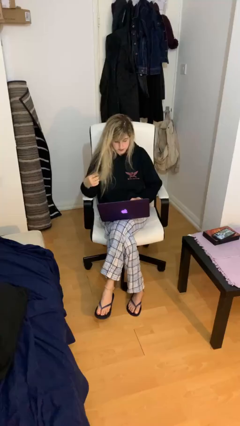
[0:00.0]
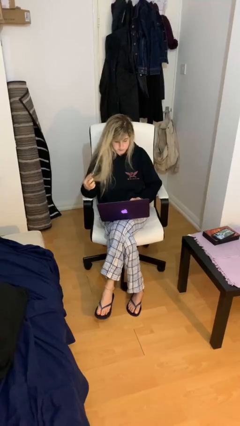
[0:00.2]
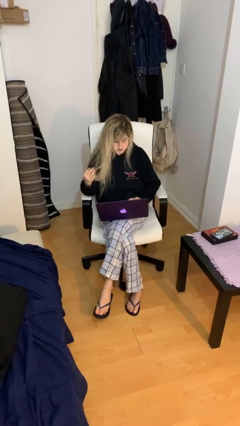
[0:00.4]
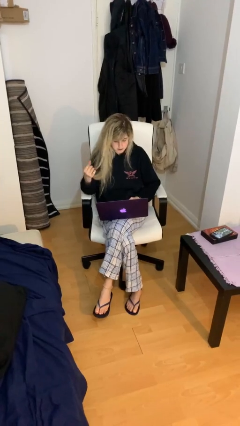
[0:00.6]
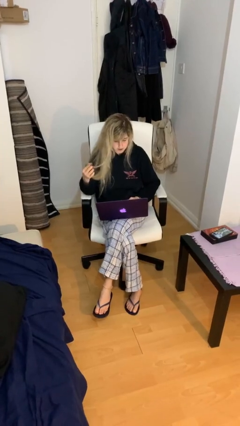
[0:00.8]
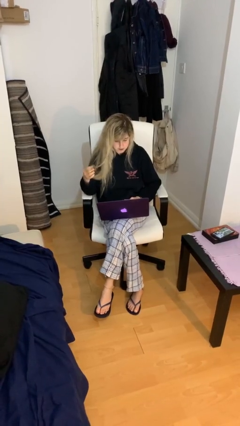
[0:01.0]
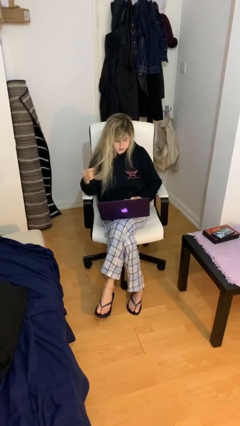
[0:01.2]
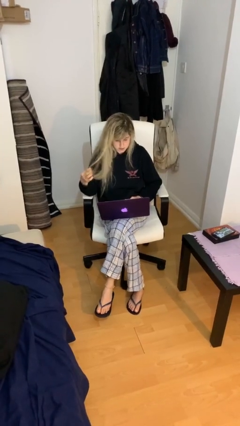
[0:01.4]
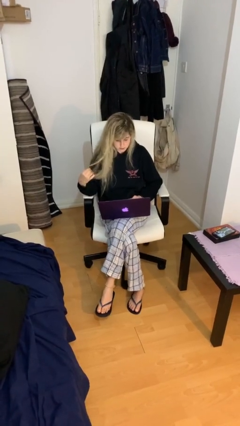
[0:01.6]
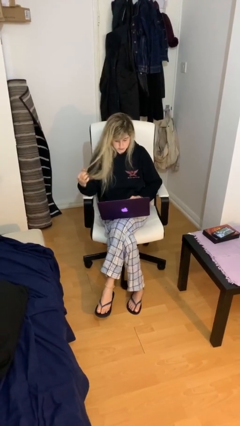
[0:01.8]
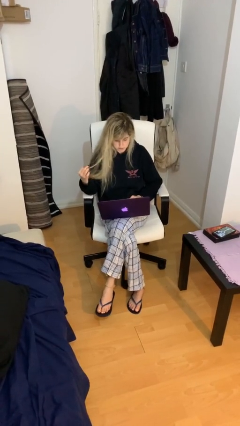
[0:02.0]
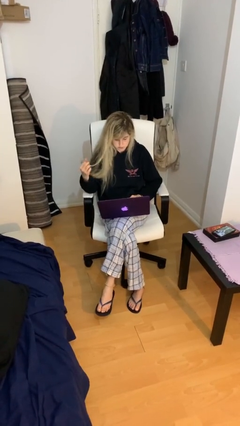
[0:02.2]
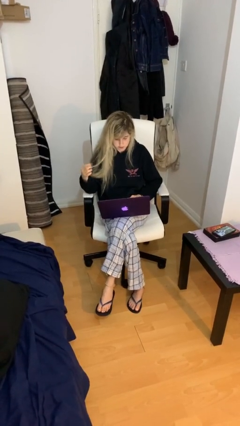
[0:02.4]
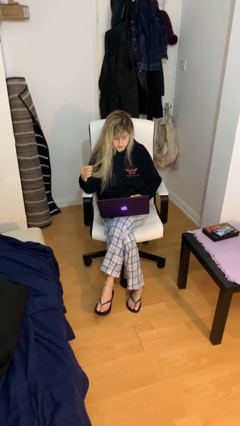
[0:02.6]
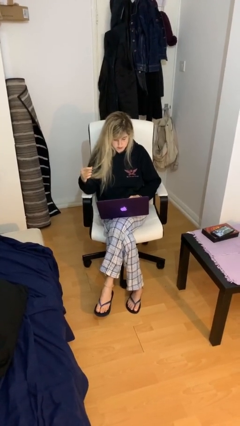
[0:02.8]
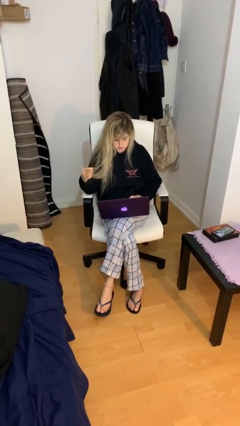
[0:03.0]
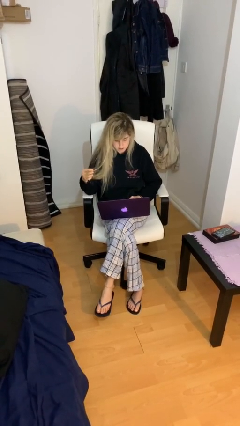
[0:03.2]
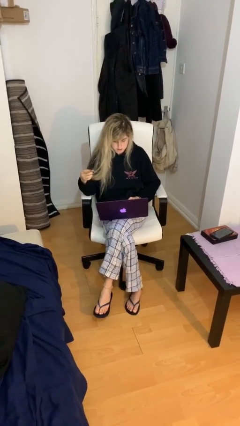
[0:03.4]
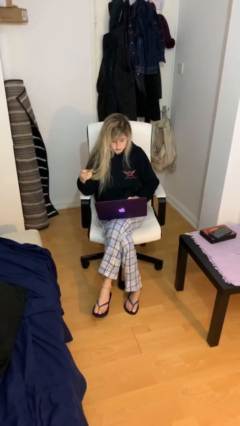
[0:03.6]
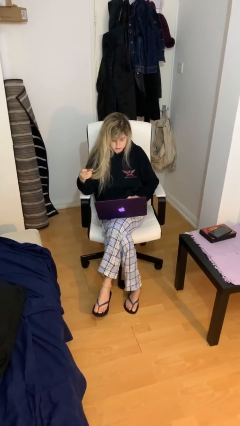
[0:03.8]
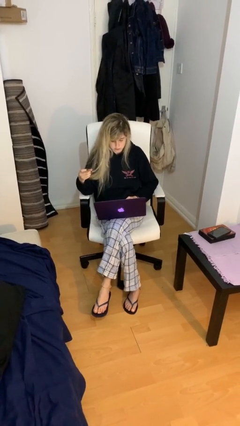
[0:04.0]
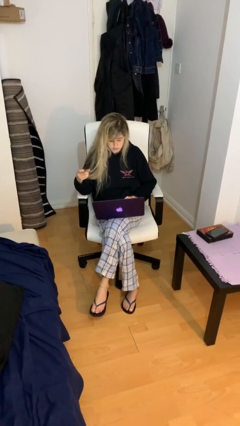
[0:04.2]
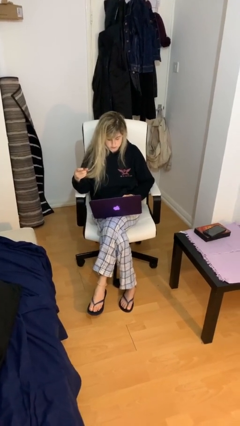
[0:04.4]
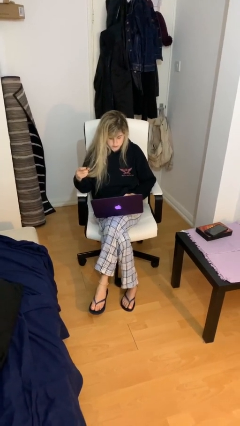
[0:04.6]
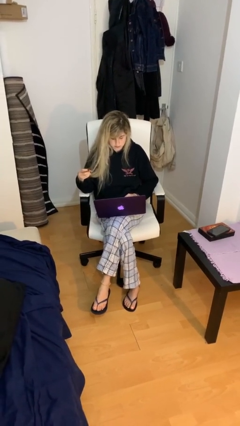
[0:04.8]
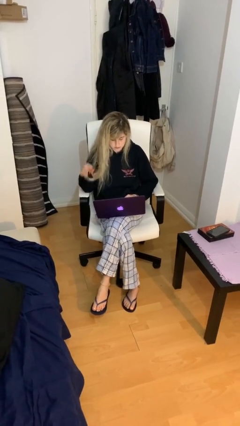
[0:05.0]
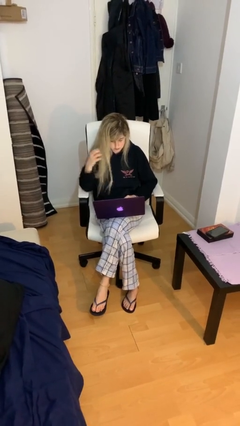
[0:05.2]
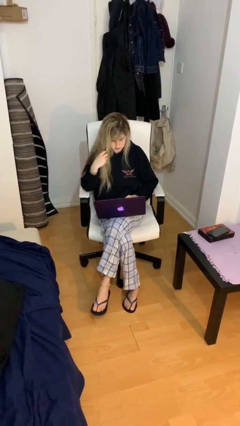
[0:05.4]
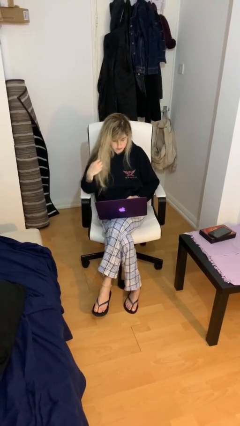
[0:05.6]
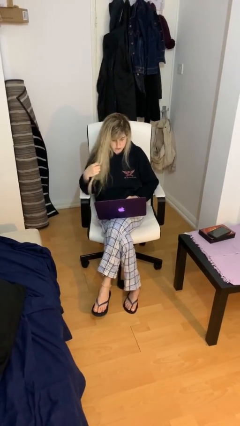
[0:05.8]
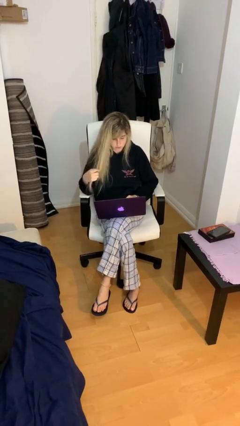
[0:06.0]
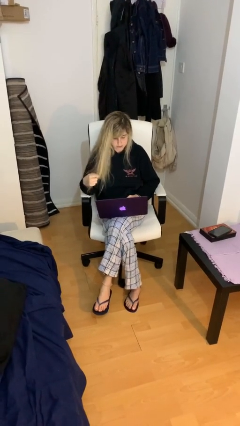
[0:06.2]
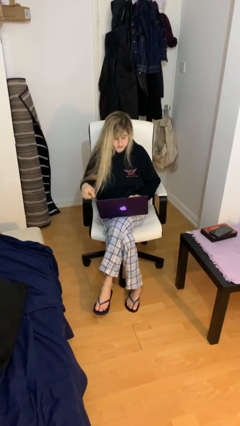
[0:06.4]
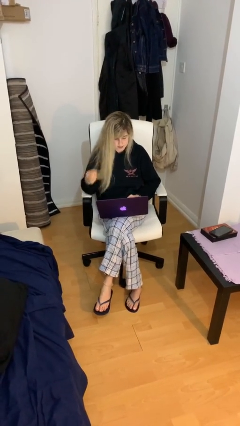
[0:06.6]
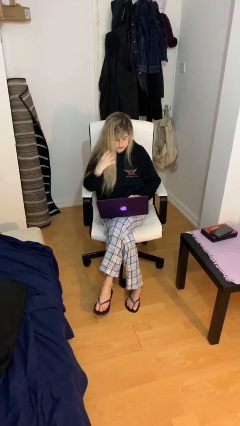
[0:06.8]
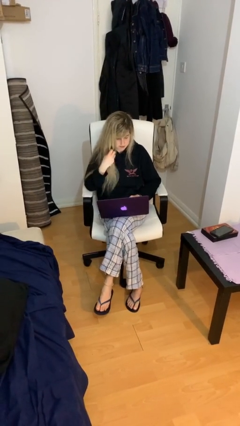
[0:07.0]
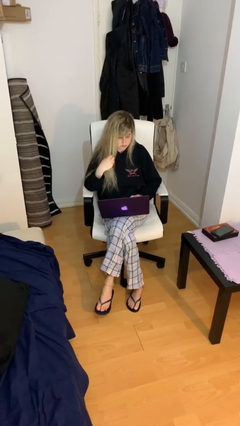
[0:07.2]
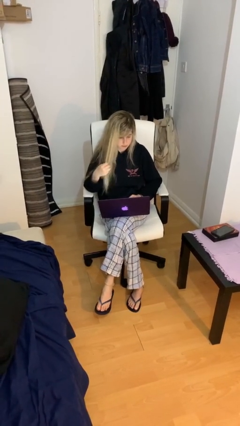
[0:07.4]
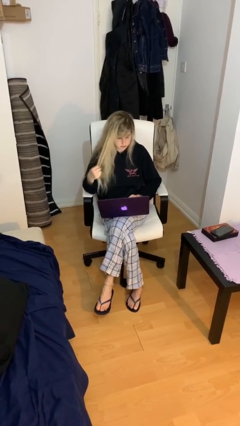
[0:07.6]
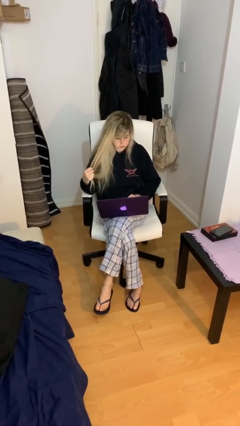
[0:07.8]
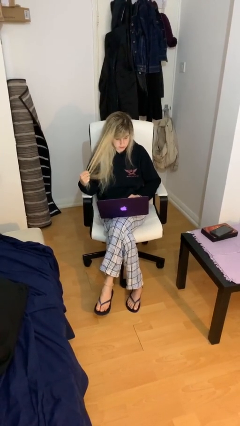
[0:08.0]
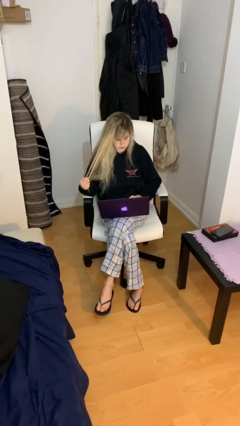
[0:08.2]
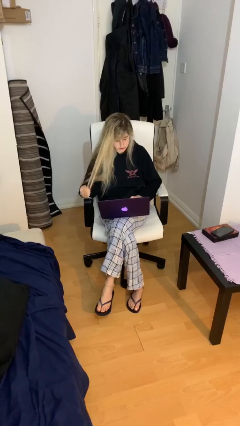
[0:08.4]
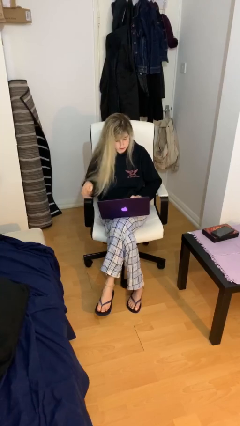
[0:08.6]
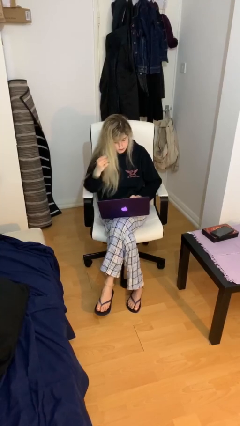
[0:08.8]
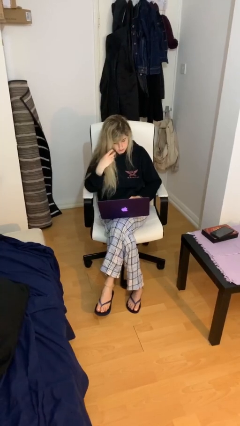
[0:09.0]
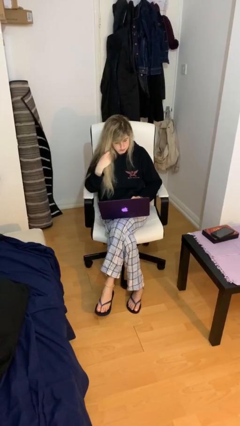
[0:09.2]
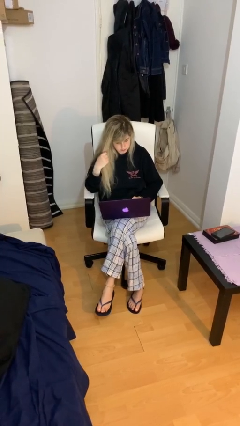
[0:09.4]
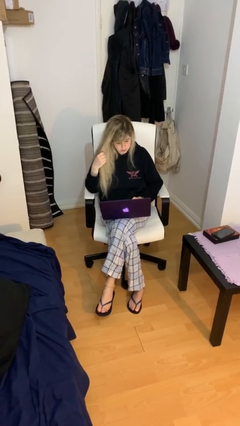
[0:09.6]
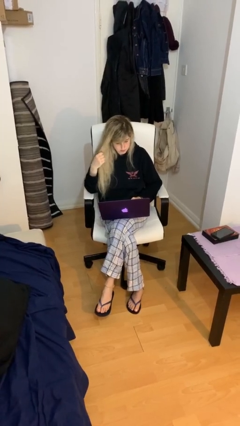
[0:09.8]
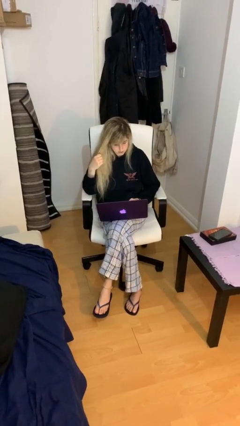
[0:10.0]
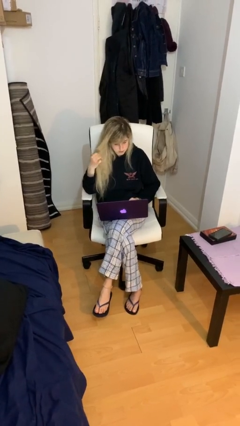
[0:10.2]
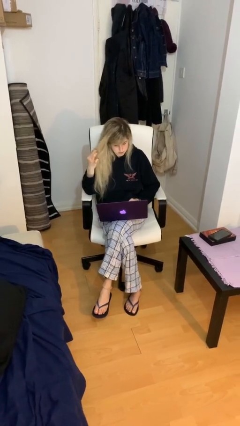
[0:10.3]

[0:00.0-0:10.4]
person interacts with laptop

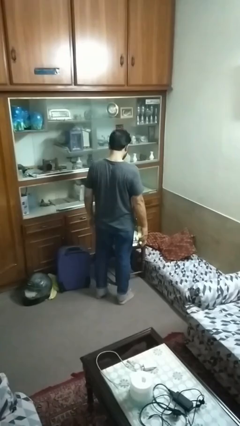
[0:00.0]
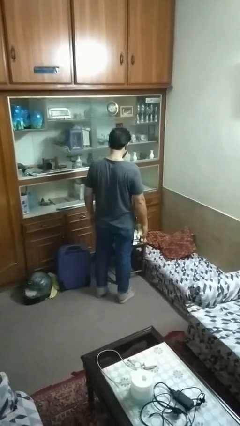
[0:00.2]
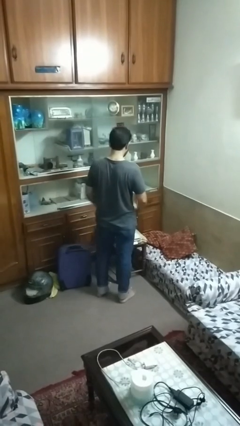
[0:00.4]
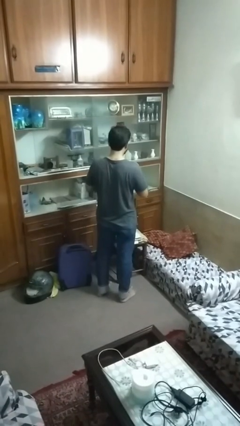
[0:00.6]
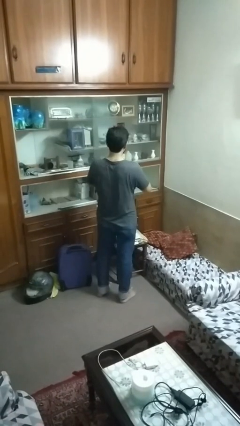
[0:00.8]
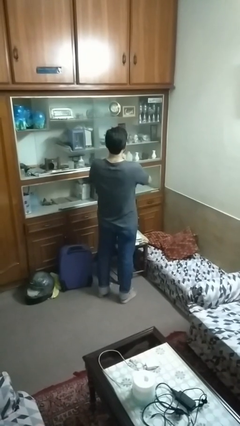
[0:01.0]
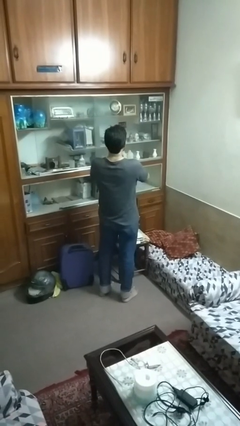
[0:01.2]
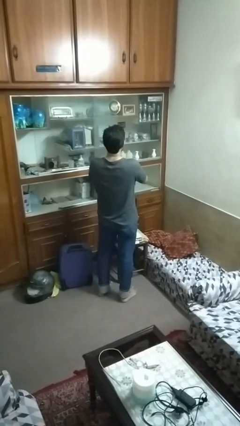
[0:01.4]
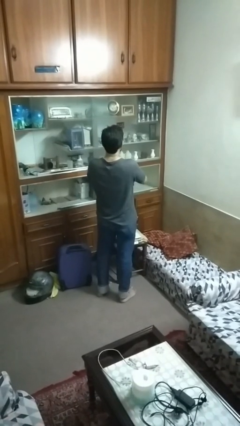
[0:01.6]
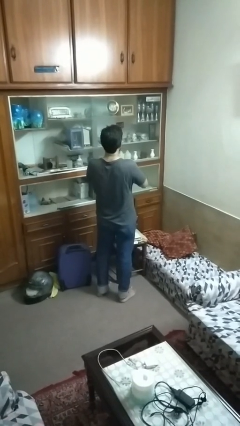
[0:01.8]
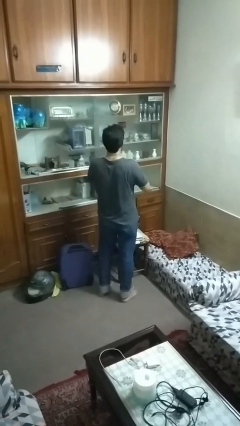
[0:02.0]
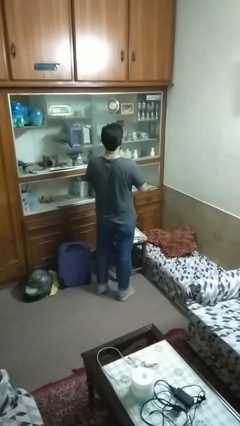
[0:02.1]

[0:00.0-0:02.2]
person hugs stuffed animal

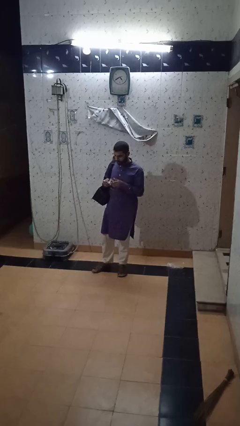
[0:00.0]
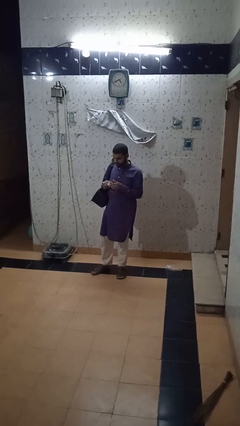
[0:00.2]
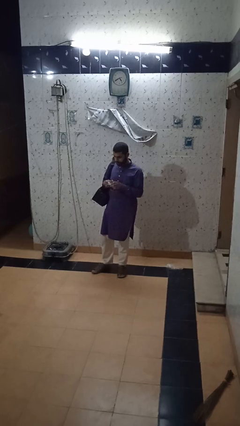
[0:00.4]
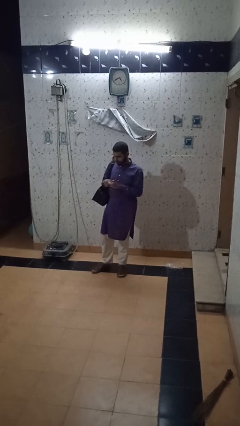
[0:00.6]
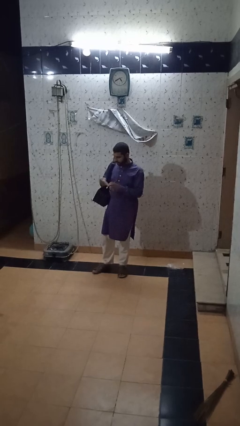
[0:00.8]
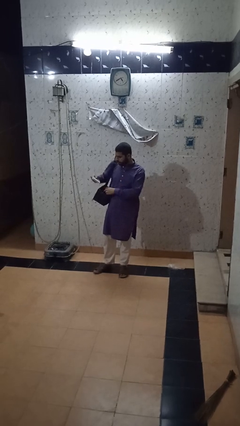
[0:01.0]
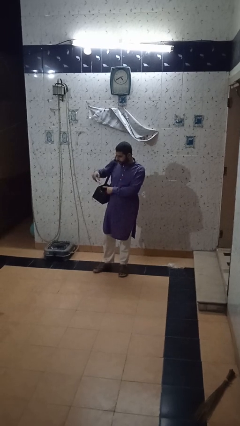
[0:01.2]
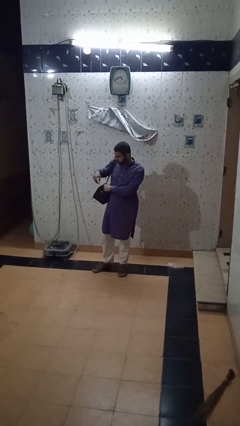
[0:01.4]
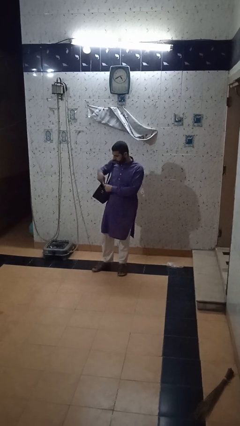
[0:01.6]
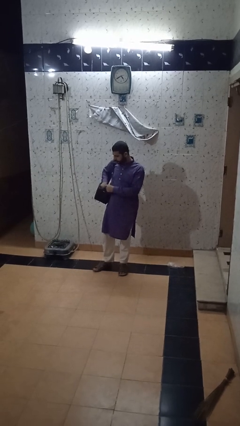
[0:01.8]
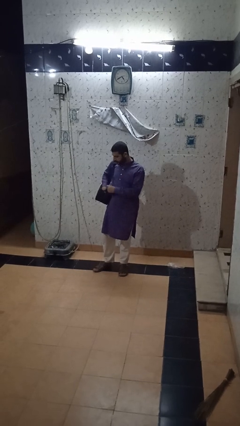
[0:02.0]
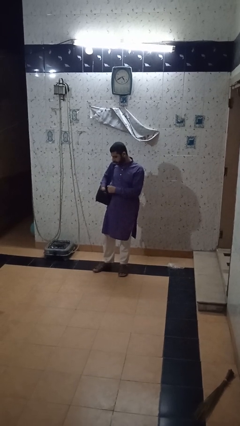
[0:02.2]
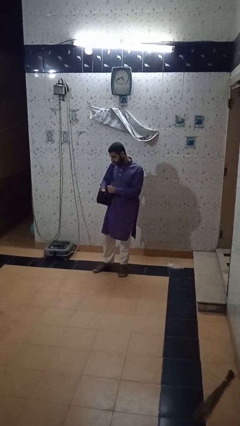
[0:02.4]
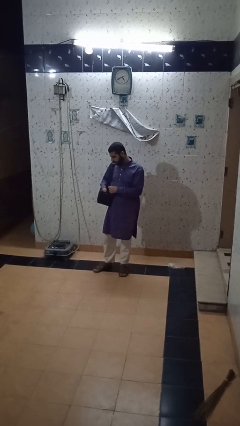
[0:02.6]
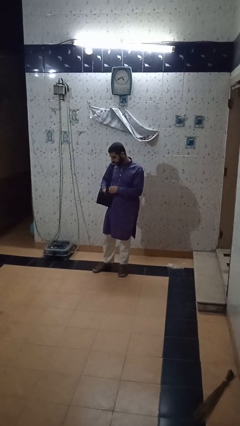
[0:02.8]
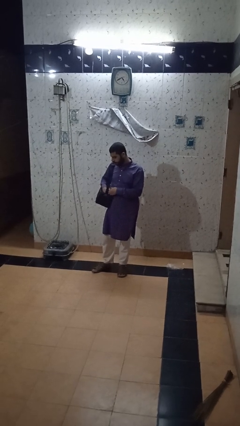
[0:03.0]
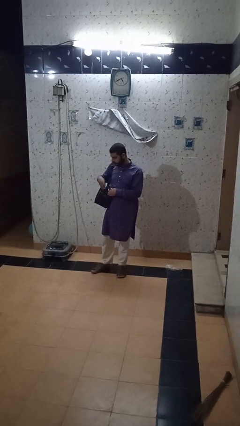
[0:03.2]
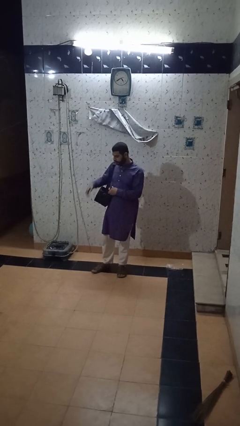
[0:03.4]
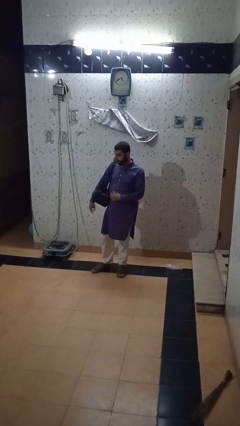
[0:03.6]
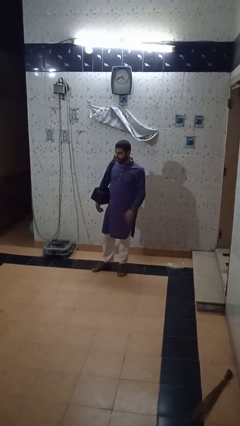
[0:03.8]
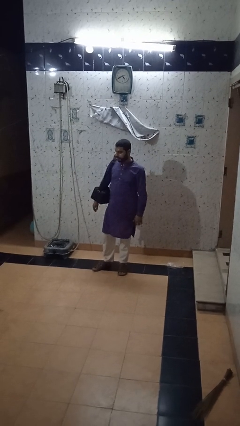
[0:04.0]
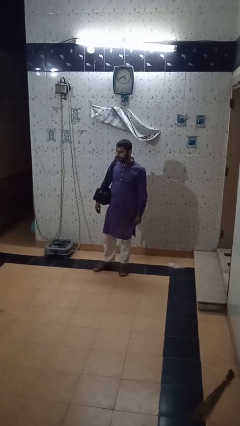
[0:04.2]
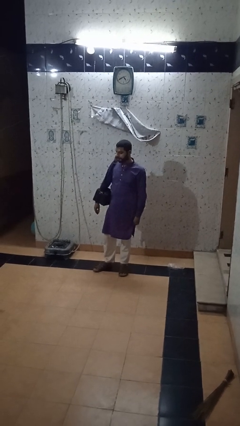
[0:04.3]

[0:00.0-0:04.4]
person puts object into backpack

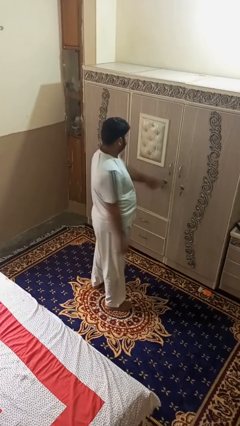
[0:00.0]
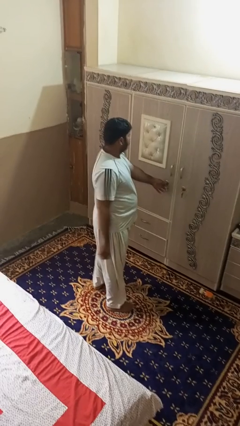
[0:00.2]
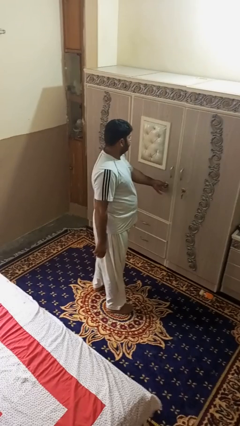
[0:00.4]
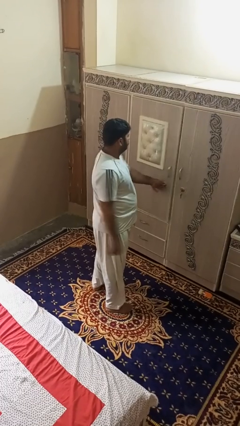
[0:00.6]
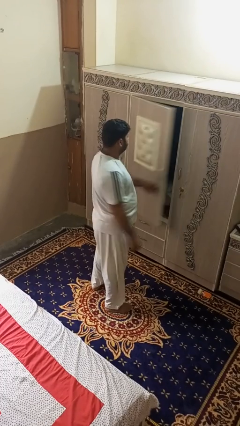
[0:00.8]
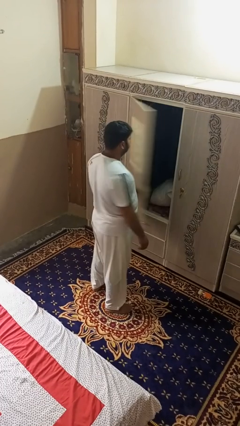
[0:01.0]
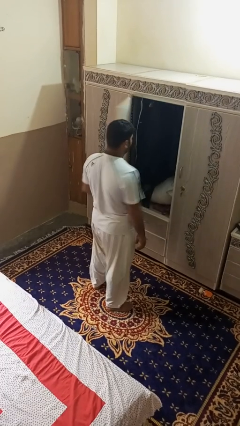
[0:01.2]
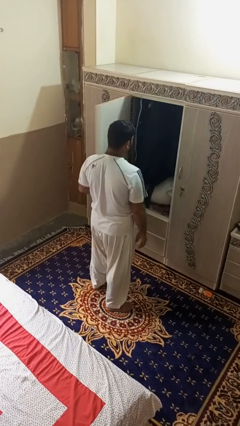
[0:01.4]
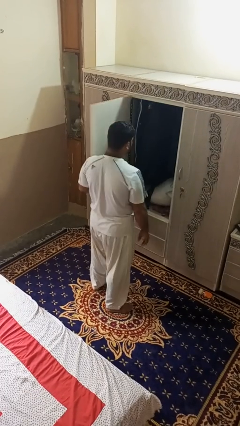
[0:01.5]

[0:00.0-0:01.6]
person opens dresser drawer
